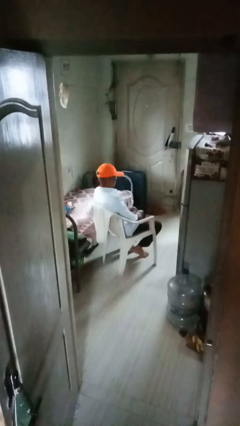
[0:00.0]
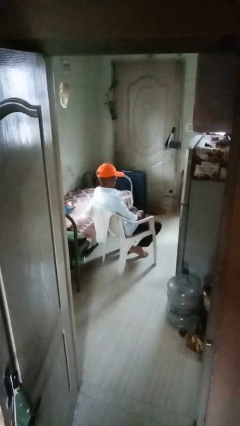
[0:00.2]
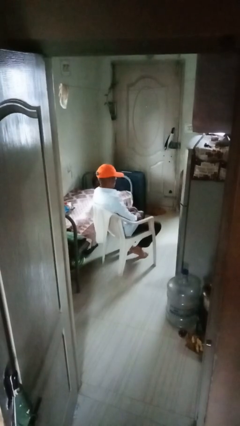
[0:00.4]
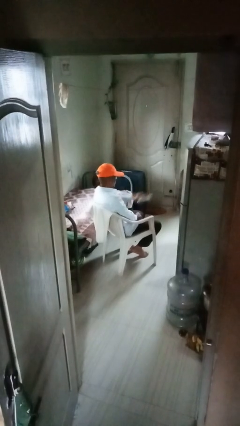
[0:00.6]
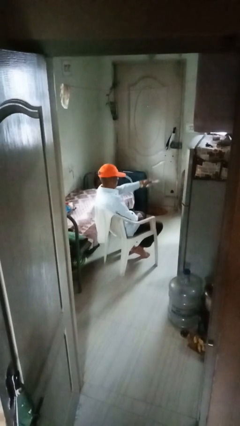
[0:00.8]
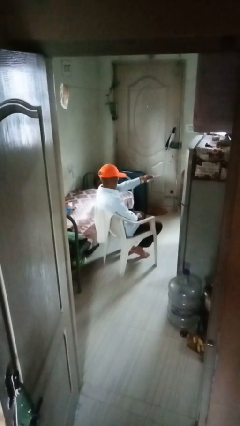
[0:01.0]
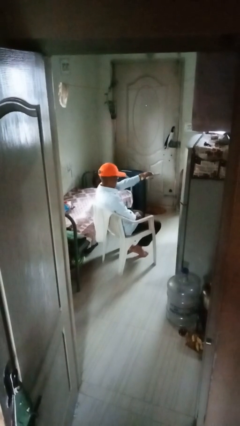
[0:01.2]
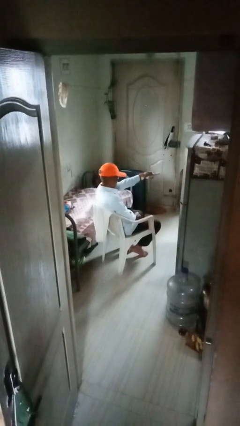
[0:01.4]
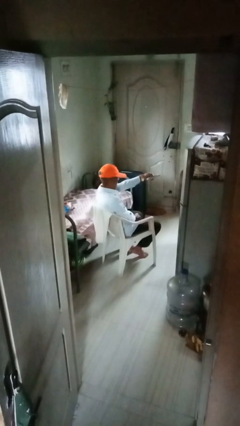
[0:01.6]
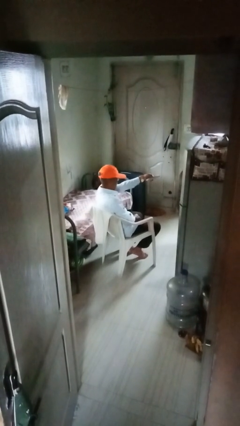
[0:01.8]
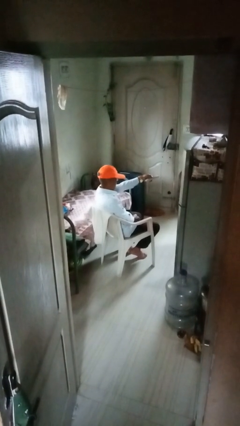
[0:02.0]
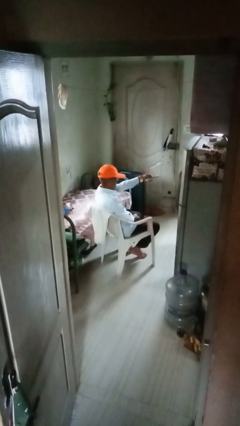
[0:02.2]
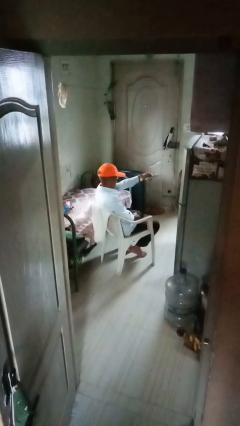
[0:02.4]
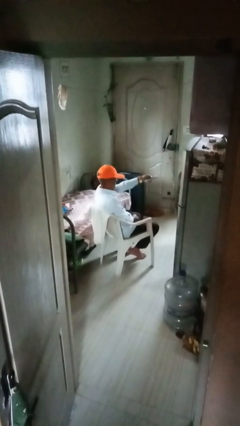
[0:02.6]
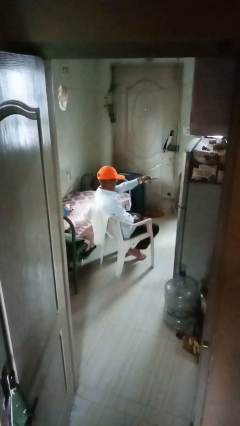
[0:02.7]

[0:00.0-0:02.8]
person uses television remote

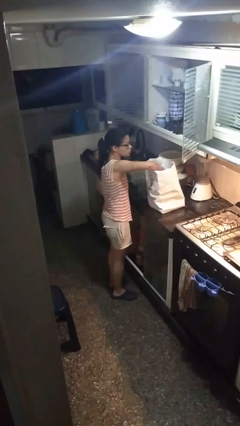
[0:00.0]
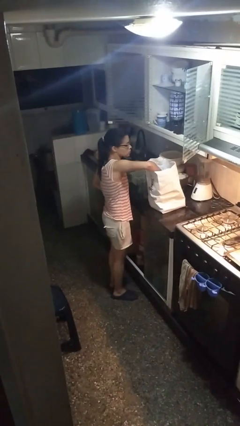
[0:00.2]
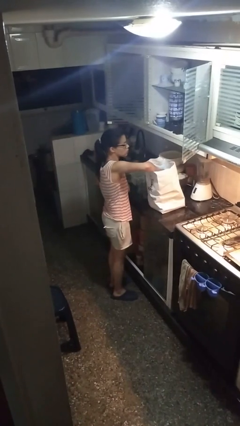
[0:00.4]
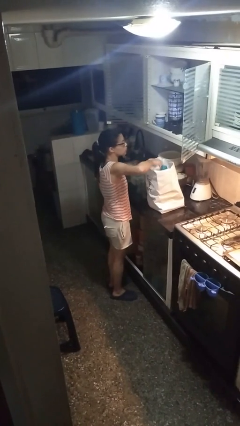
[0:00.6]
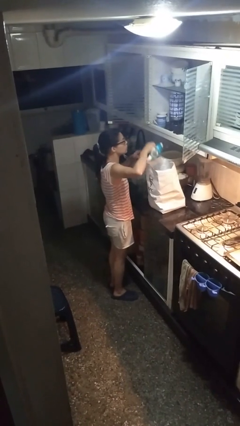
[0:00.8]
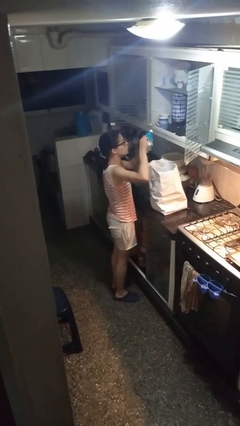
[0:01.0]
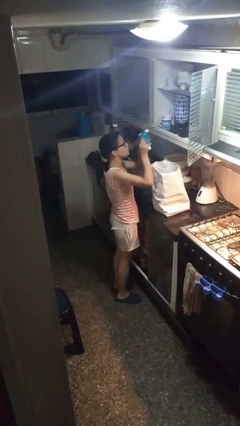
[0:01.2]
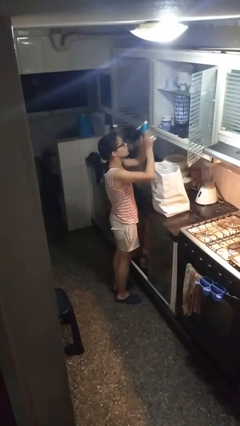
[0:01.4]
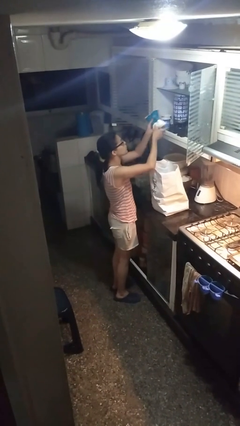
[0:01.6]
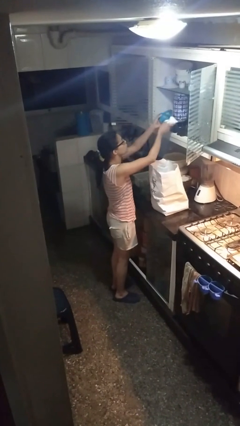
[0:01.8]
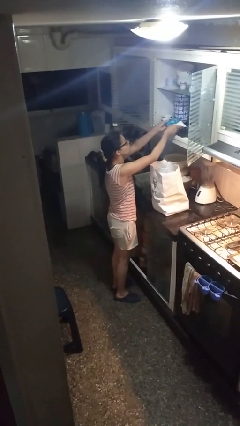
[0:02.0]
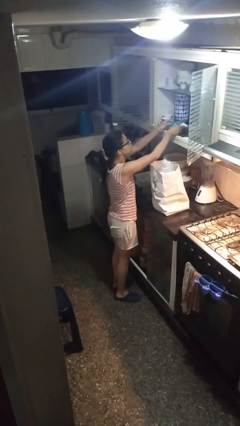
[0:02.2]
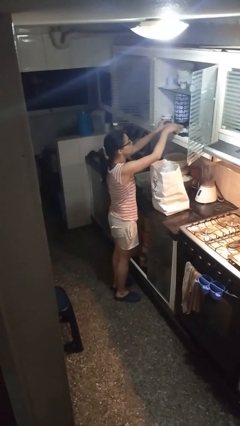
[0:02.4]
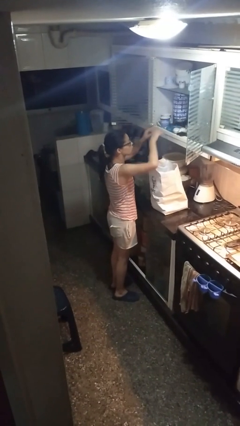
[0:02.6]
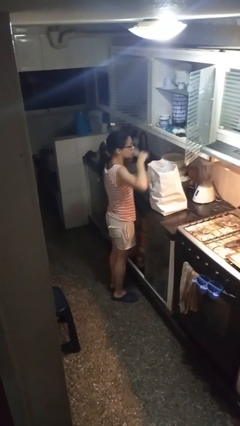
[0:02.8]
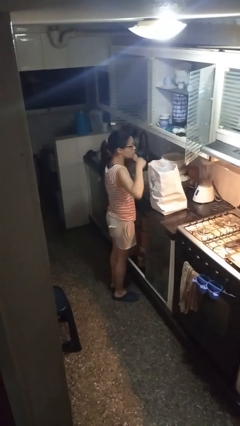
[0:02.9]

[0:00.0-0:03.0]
person loads groceries into cabinet

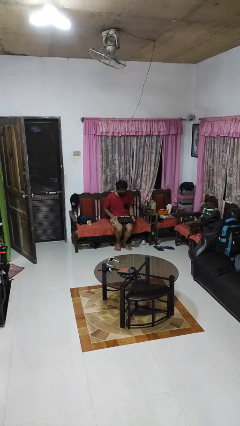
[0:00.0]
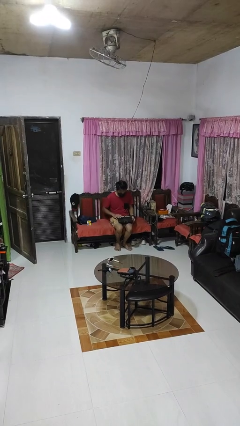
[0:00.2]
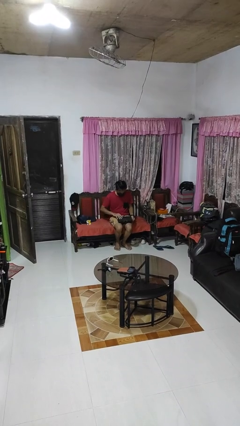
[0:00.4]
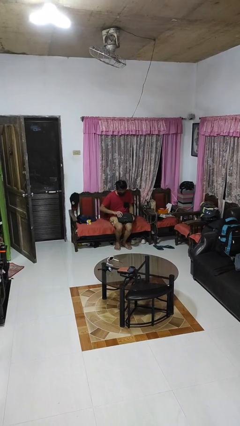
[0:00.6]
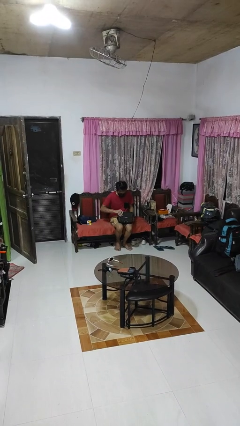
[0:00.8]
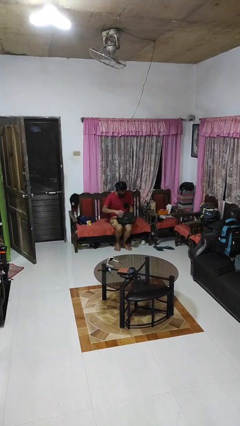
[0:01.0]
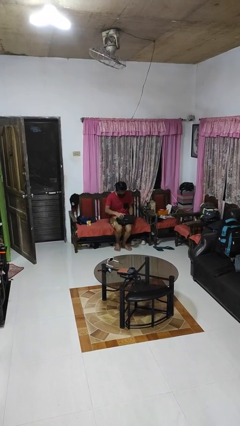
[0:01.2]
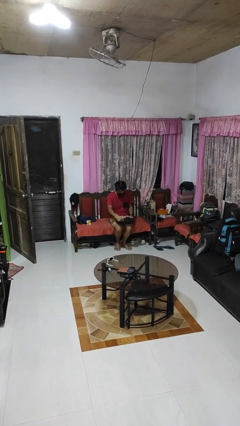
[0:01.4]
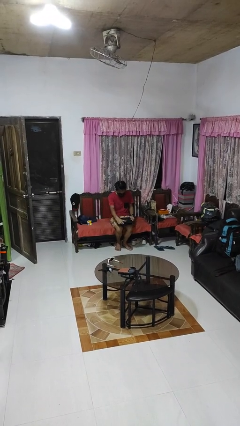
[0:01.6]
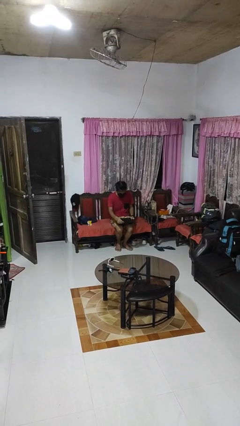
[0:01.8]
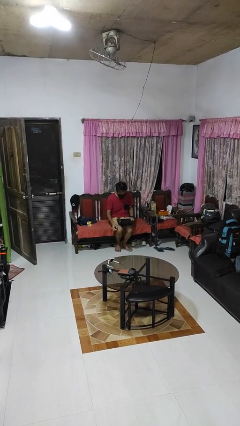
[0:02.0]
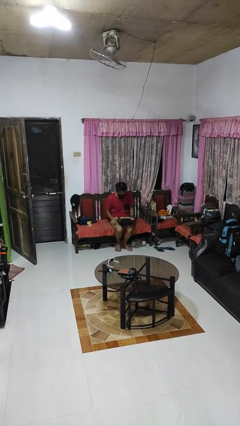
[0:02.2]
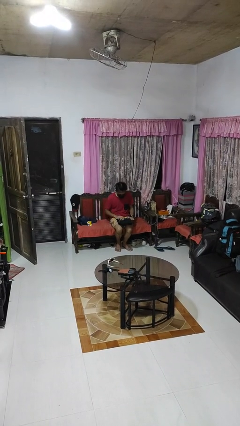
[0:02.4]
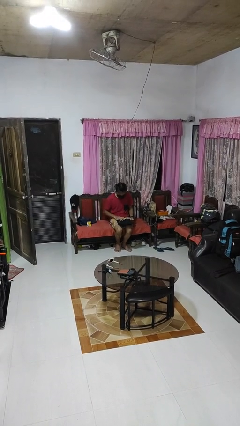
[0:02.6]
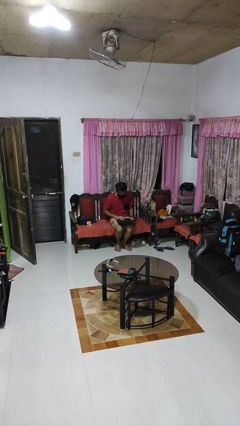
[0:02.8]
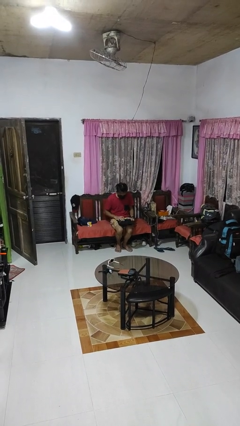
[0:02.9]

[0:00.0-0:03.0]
person opens laptop

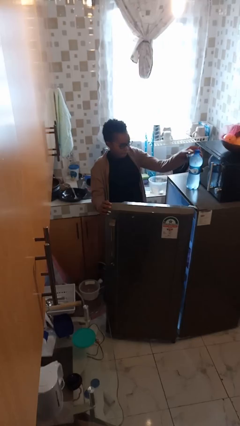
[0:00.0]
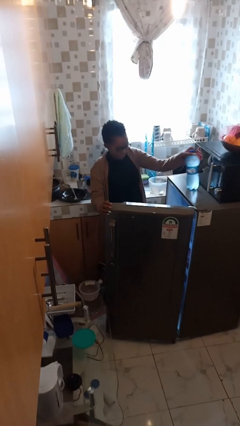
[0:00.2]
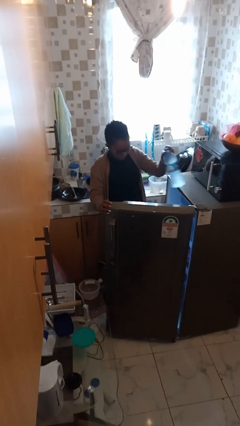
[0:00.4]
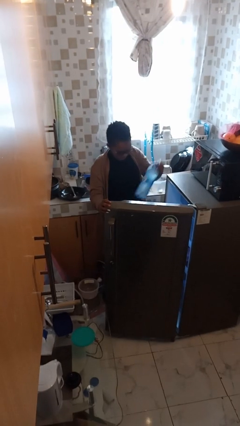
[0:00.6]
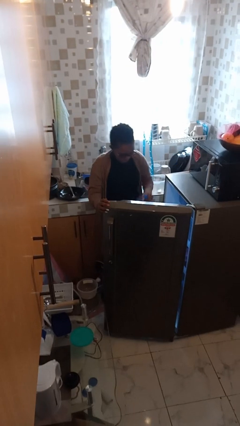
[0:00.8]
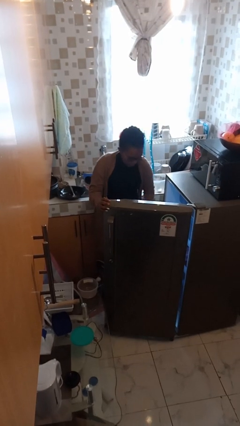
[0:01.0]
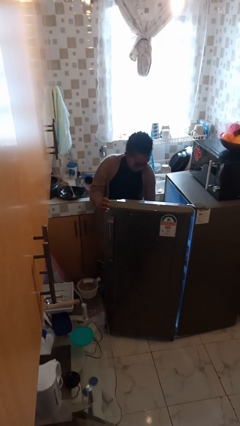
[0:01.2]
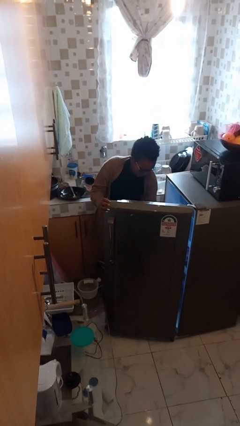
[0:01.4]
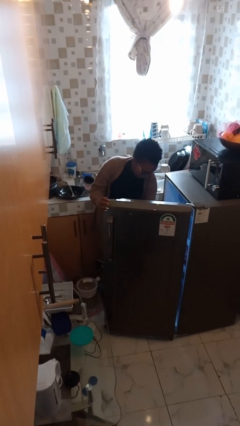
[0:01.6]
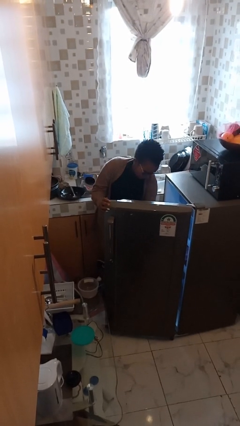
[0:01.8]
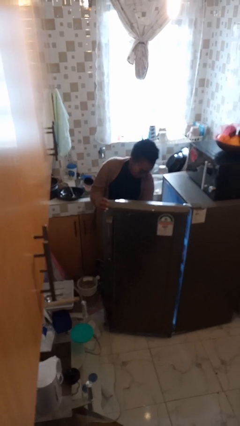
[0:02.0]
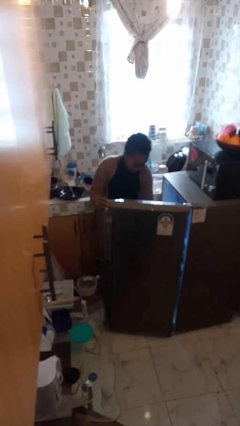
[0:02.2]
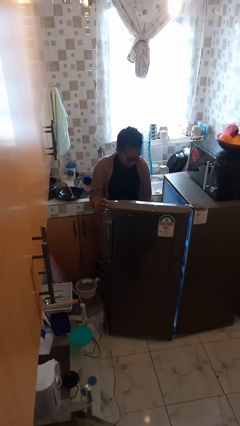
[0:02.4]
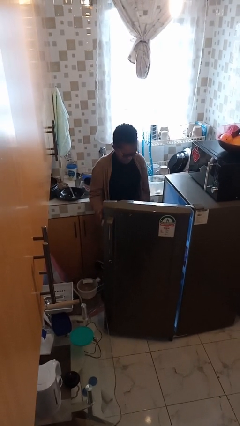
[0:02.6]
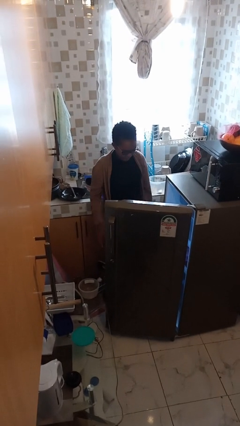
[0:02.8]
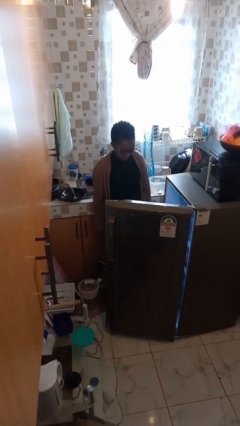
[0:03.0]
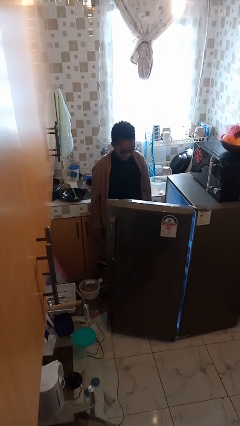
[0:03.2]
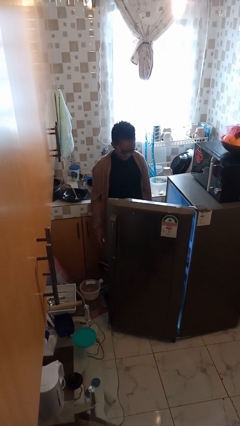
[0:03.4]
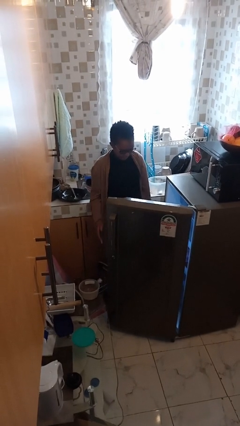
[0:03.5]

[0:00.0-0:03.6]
person puts object into refrigerator

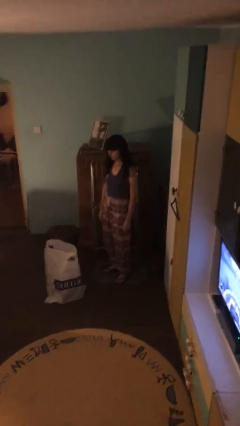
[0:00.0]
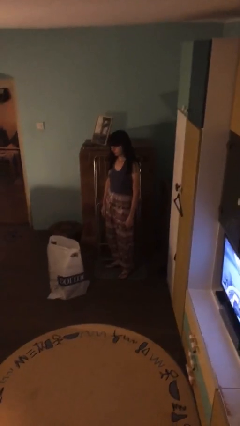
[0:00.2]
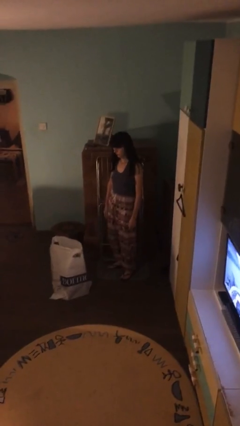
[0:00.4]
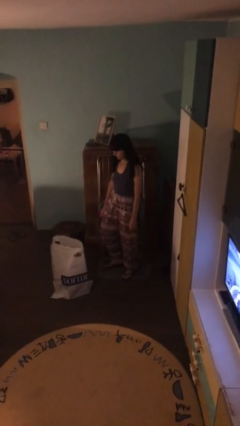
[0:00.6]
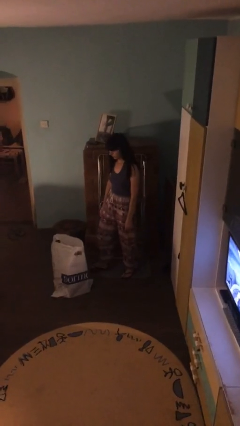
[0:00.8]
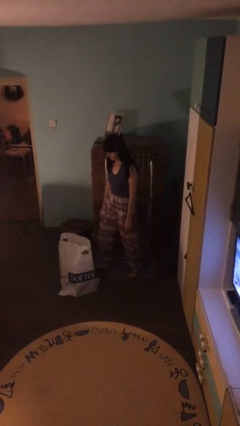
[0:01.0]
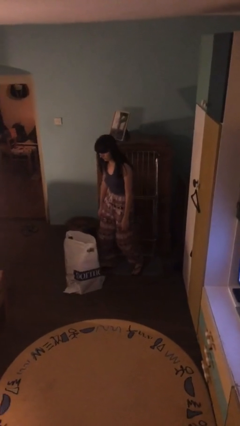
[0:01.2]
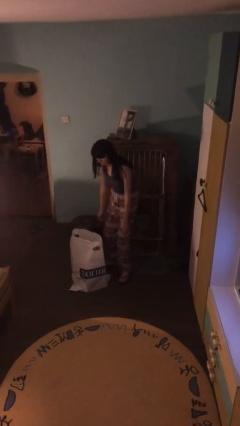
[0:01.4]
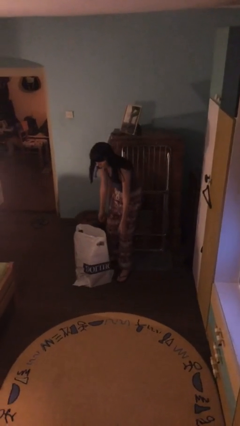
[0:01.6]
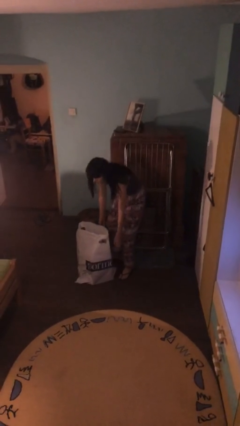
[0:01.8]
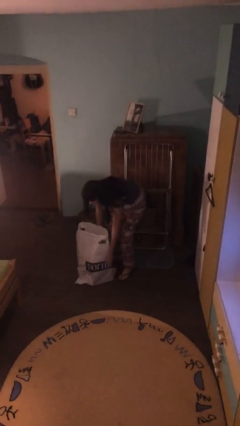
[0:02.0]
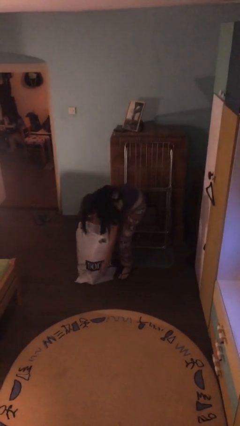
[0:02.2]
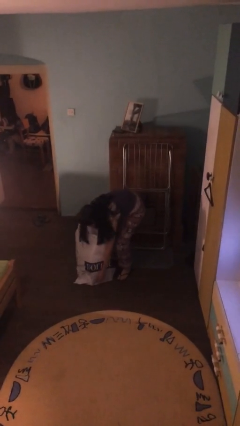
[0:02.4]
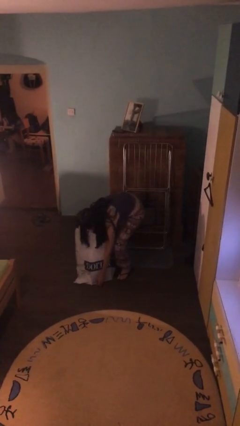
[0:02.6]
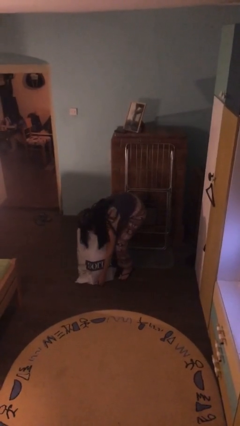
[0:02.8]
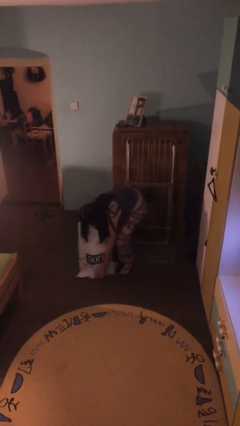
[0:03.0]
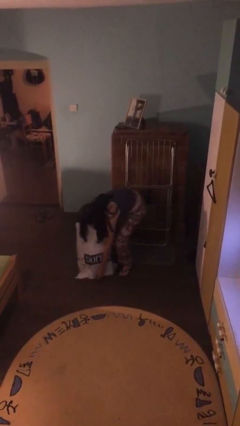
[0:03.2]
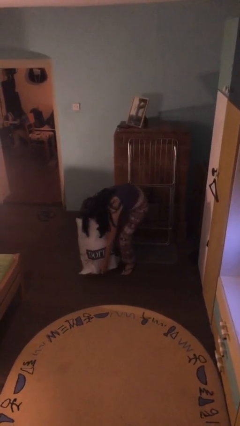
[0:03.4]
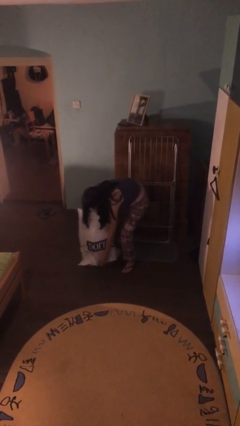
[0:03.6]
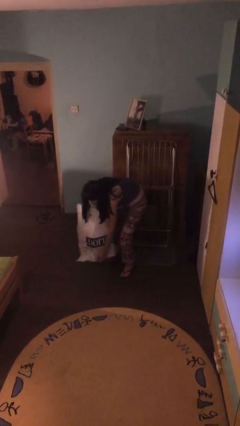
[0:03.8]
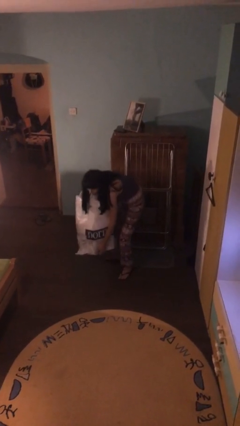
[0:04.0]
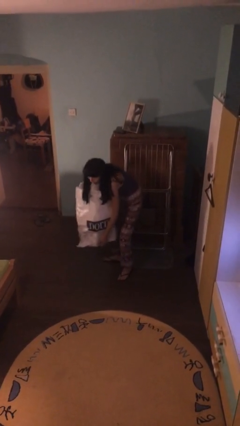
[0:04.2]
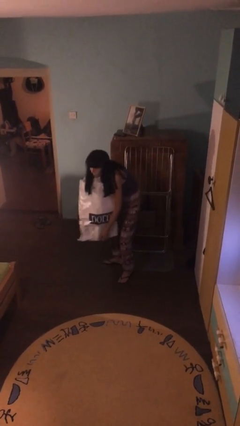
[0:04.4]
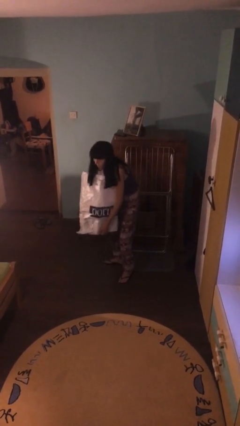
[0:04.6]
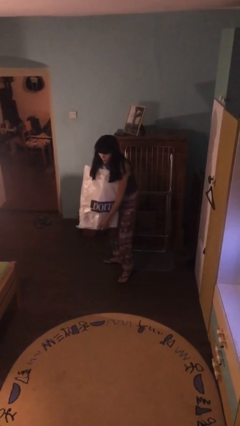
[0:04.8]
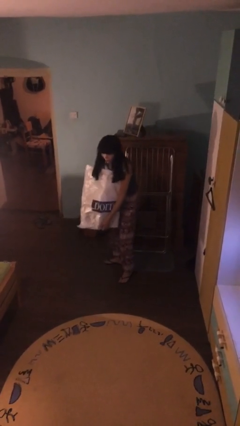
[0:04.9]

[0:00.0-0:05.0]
person picks up object from floor

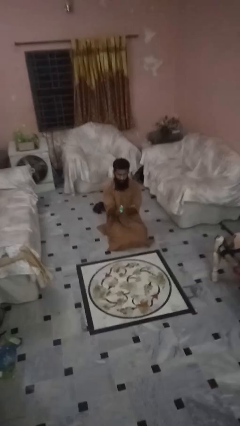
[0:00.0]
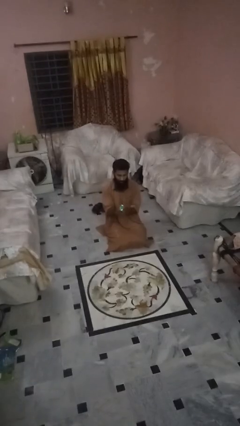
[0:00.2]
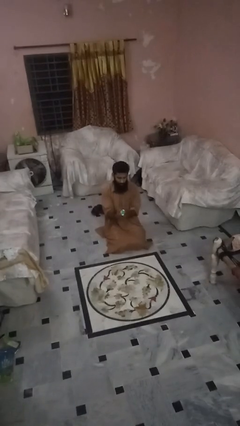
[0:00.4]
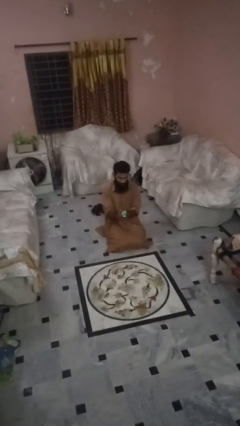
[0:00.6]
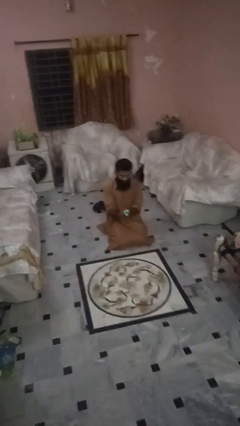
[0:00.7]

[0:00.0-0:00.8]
person drops object
